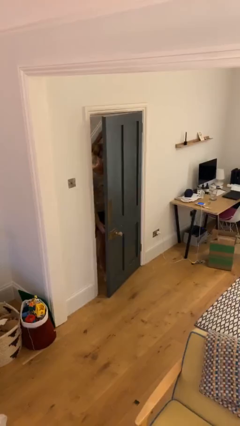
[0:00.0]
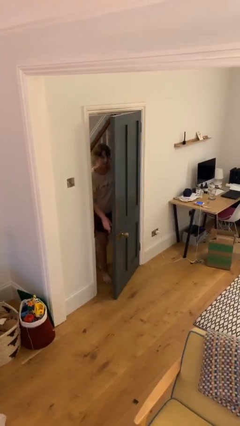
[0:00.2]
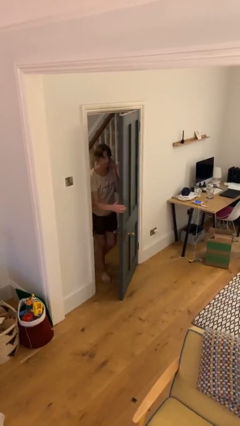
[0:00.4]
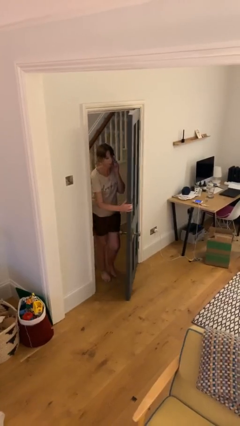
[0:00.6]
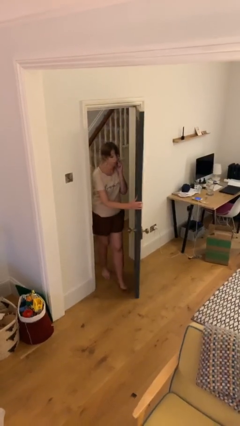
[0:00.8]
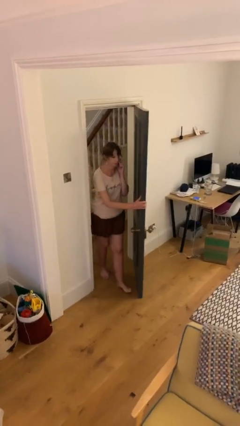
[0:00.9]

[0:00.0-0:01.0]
person opens facility door

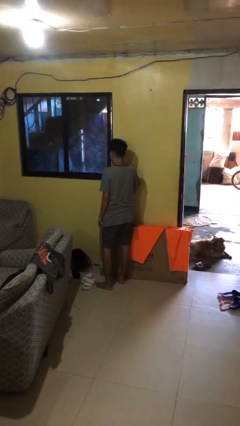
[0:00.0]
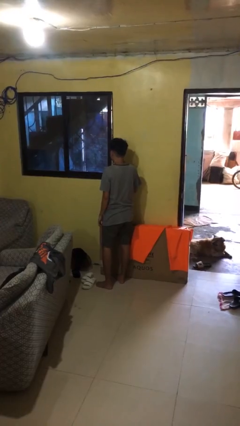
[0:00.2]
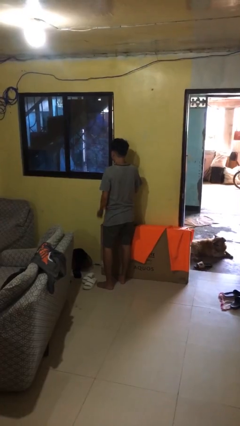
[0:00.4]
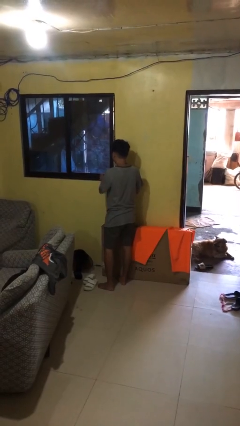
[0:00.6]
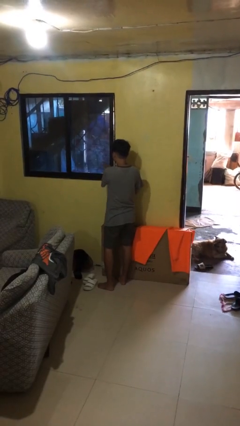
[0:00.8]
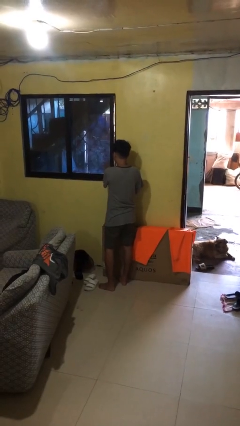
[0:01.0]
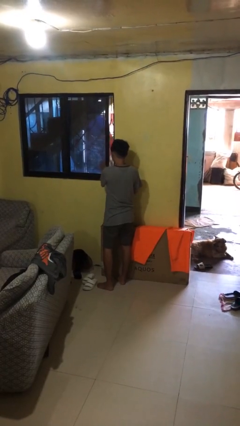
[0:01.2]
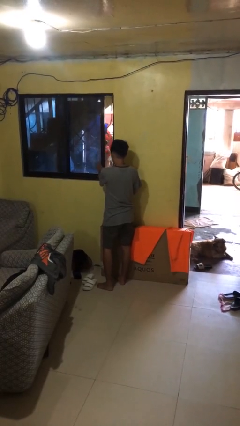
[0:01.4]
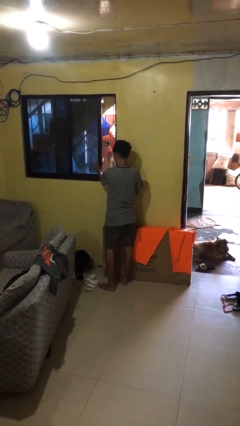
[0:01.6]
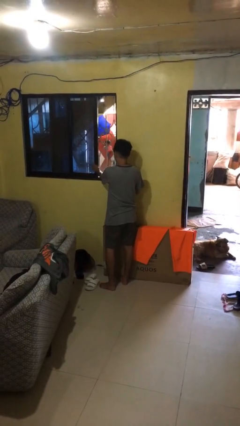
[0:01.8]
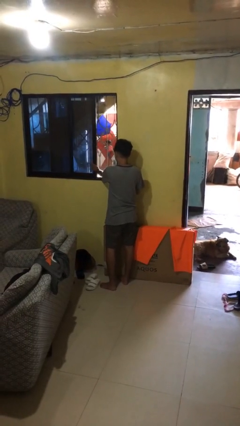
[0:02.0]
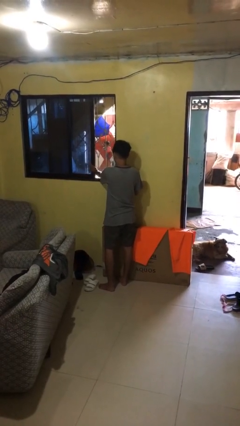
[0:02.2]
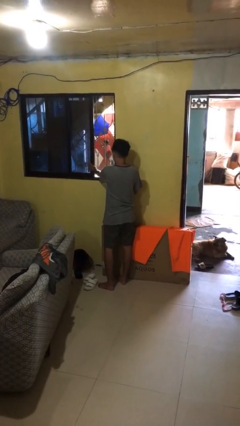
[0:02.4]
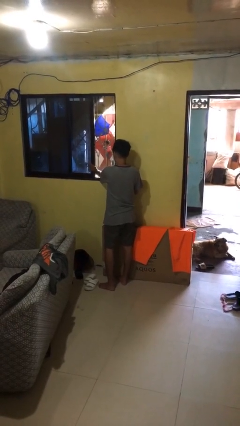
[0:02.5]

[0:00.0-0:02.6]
person opens home window

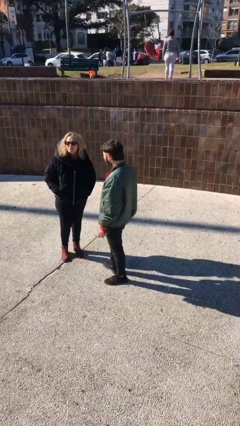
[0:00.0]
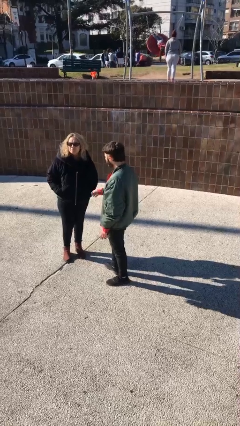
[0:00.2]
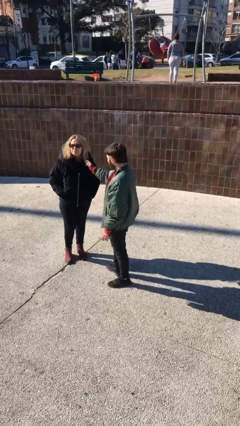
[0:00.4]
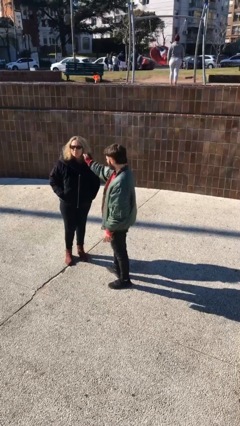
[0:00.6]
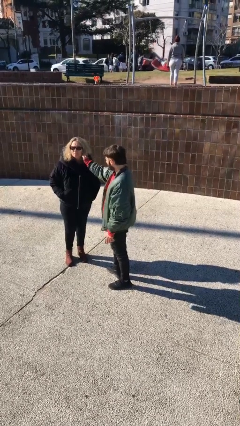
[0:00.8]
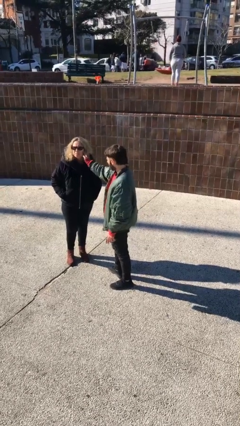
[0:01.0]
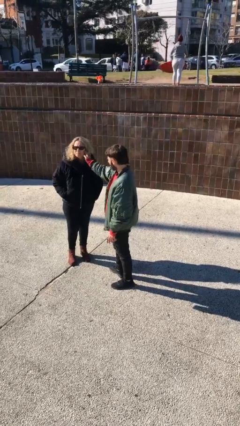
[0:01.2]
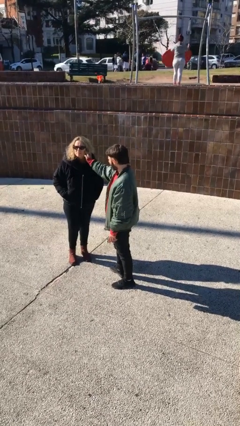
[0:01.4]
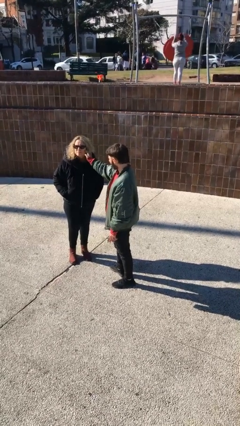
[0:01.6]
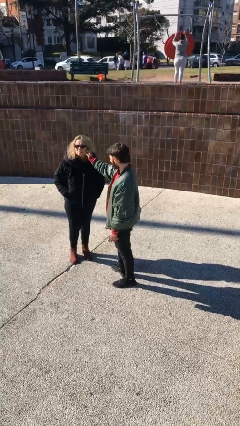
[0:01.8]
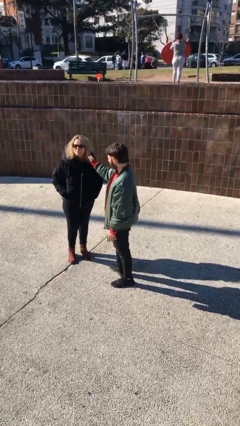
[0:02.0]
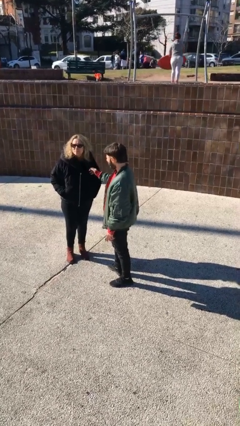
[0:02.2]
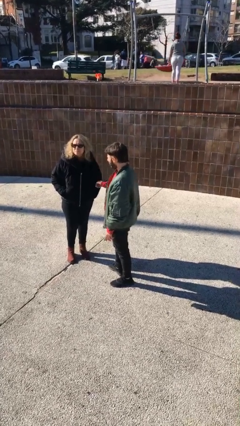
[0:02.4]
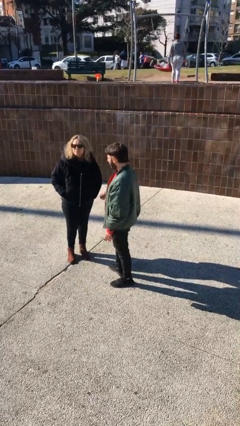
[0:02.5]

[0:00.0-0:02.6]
person touches face of person

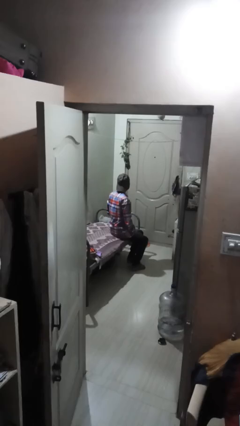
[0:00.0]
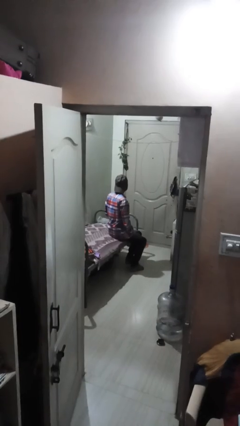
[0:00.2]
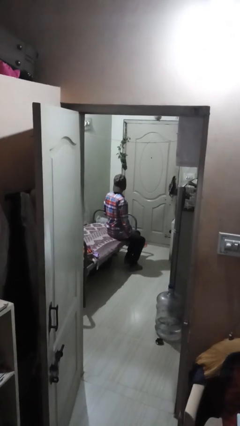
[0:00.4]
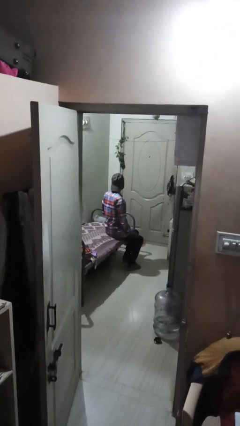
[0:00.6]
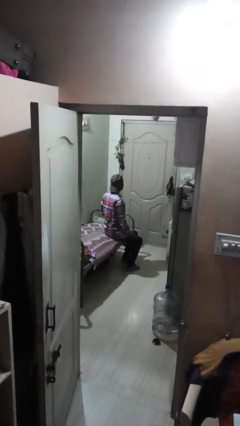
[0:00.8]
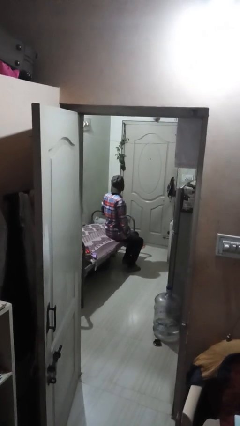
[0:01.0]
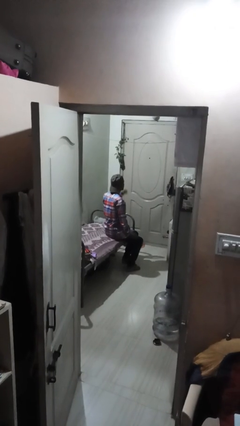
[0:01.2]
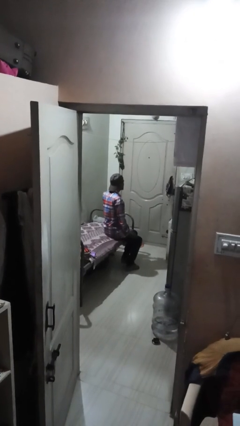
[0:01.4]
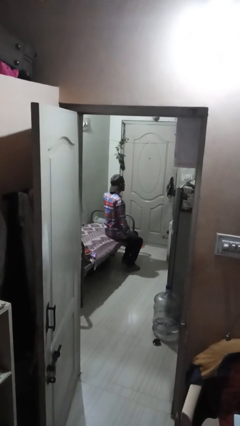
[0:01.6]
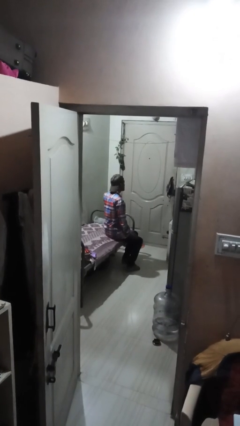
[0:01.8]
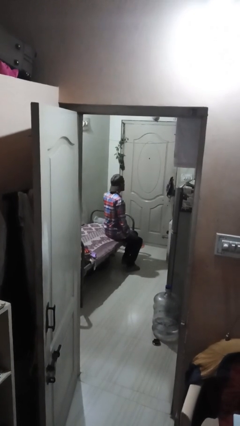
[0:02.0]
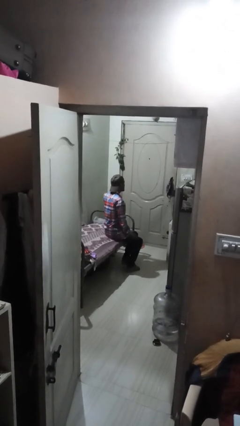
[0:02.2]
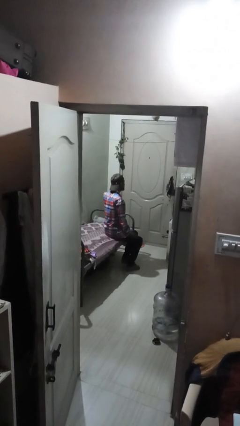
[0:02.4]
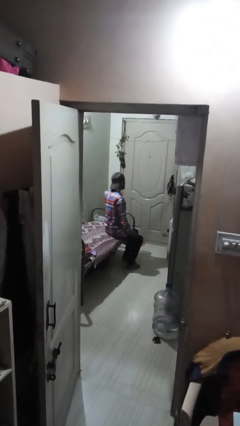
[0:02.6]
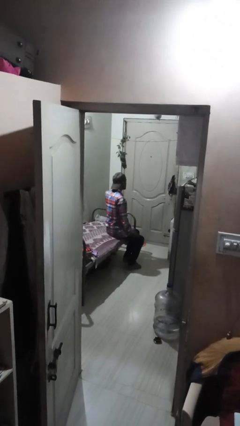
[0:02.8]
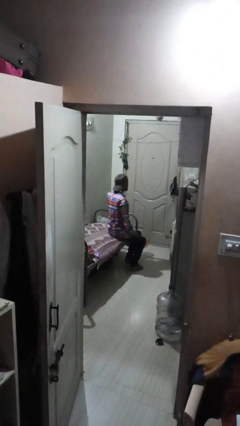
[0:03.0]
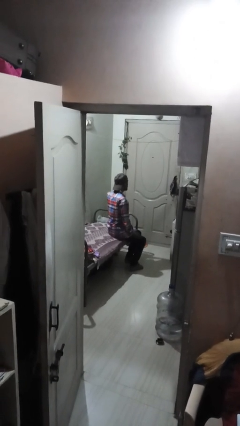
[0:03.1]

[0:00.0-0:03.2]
person rubs eyes

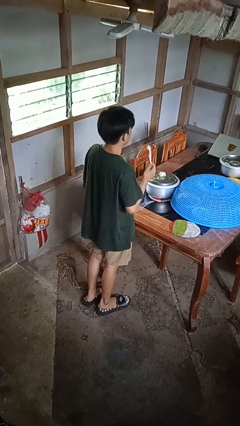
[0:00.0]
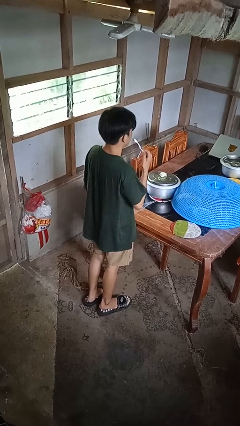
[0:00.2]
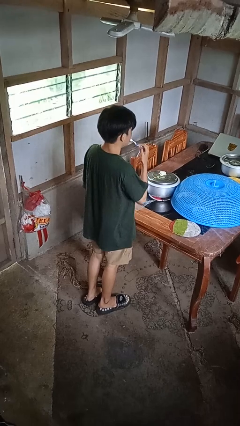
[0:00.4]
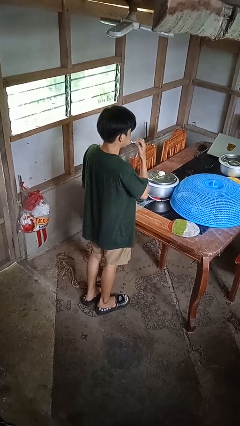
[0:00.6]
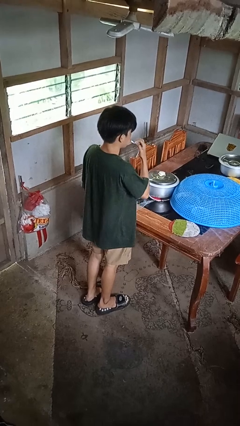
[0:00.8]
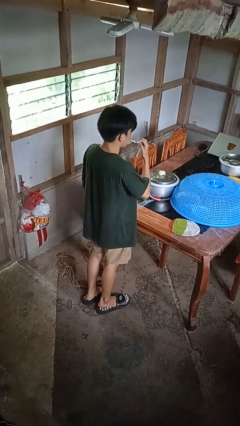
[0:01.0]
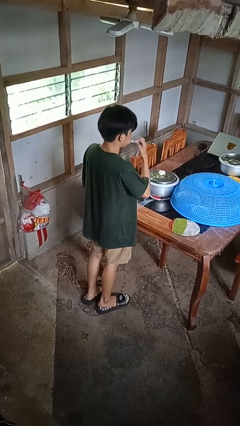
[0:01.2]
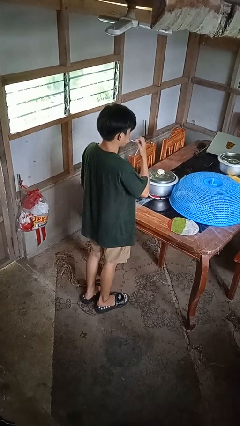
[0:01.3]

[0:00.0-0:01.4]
person brushes teeth

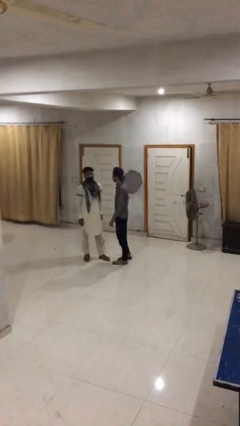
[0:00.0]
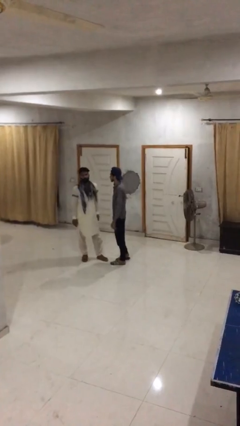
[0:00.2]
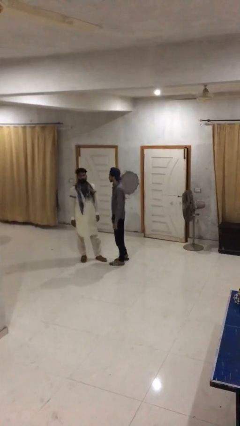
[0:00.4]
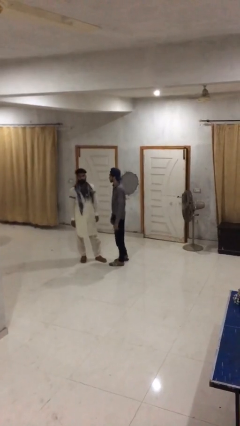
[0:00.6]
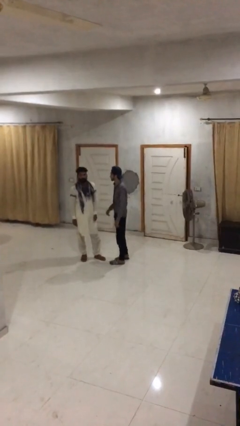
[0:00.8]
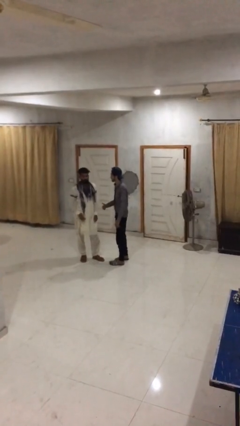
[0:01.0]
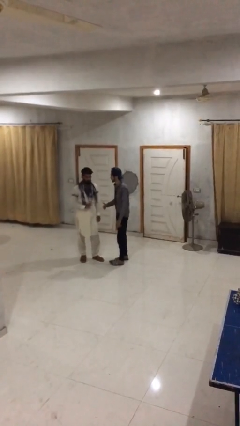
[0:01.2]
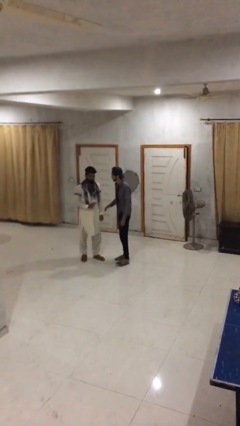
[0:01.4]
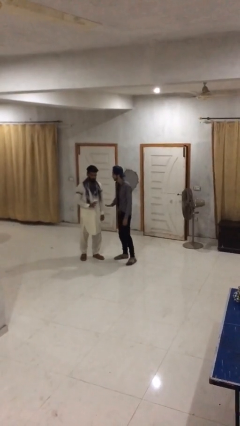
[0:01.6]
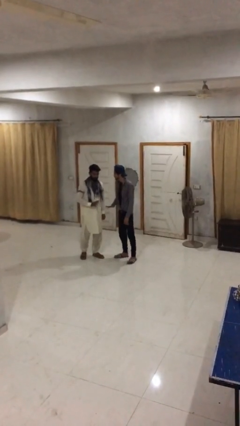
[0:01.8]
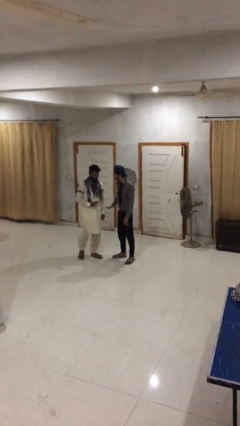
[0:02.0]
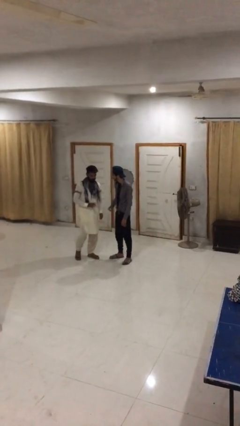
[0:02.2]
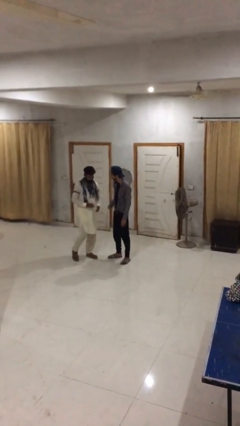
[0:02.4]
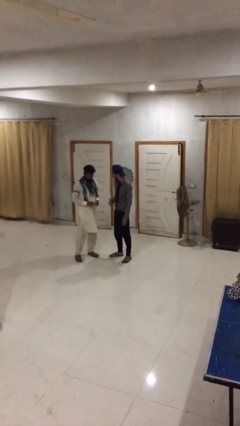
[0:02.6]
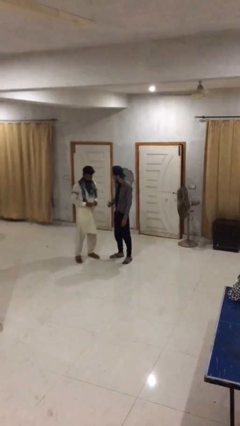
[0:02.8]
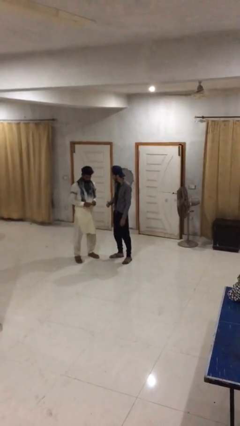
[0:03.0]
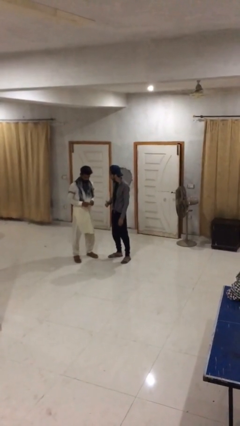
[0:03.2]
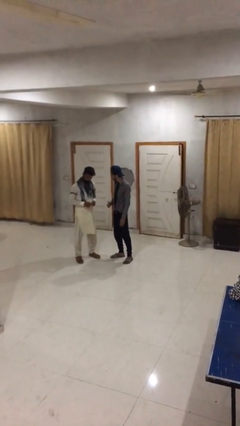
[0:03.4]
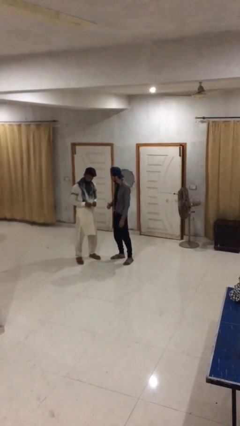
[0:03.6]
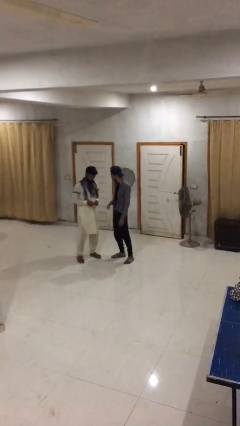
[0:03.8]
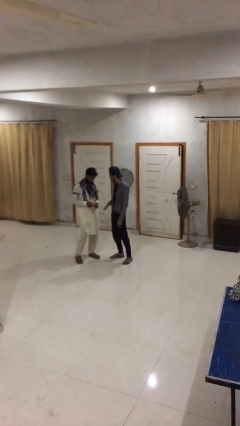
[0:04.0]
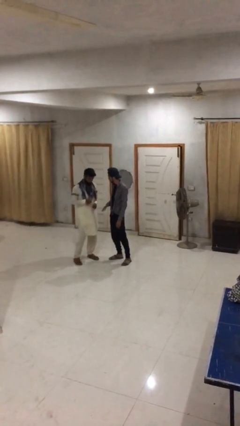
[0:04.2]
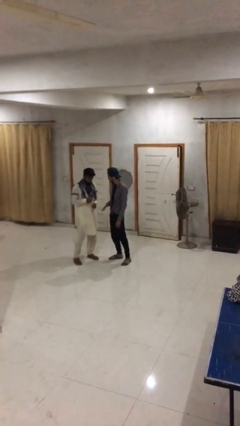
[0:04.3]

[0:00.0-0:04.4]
person talks to person

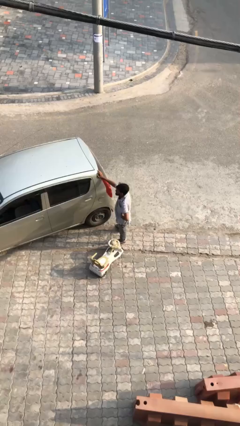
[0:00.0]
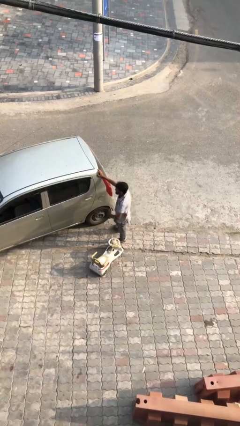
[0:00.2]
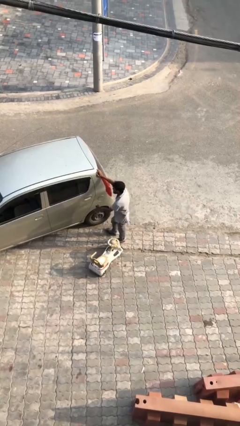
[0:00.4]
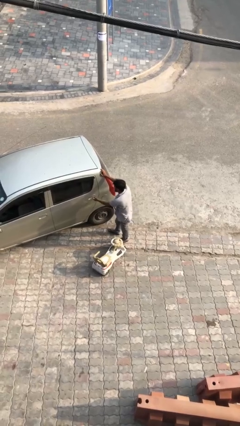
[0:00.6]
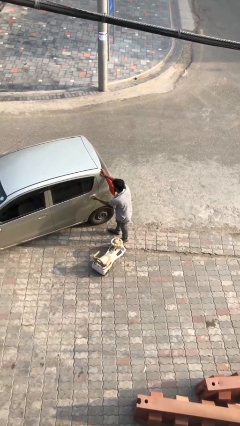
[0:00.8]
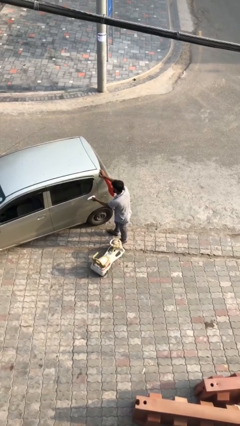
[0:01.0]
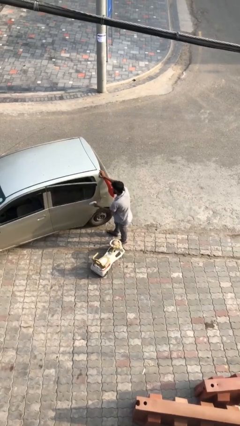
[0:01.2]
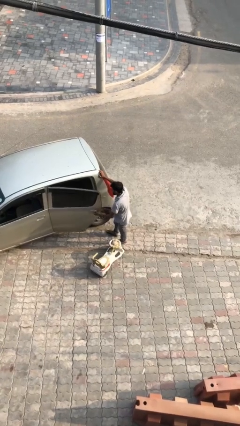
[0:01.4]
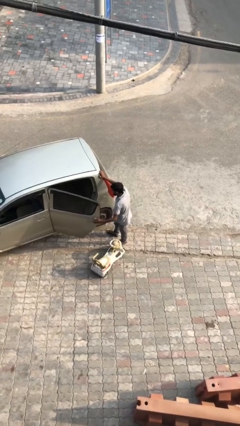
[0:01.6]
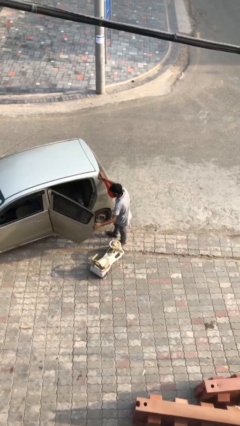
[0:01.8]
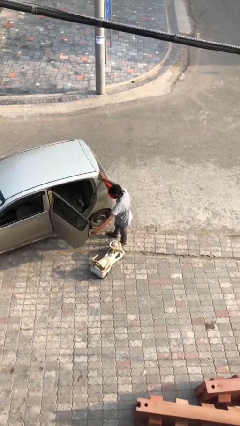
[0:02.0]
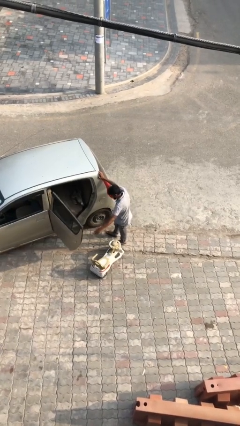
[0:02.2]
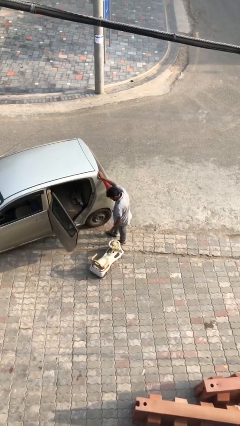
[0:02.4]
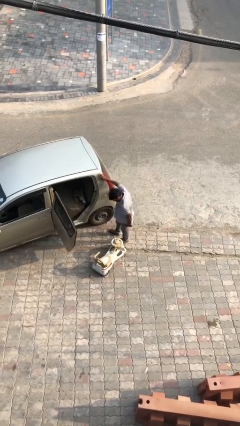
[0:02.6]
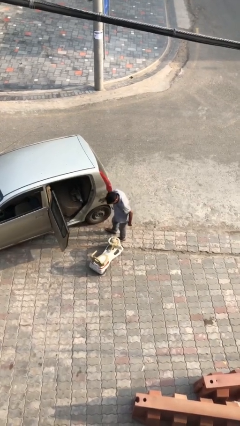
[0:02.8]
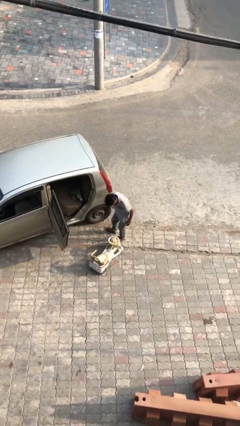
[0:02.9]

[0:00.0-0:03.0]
person opens car door
